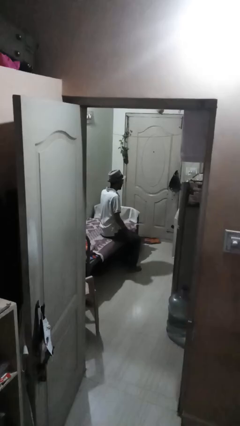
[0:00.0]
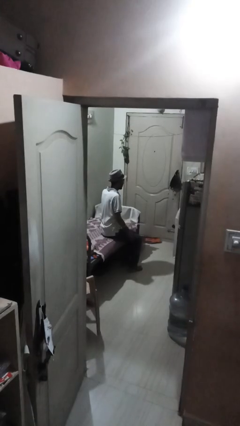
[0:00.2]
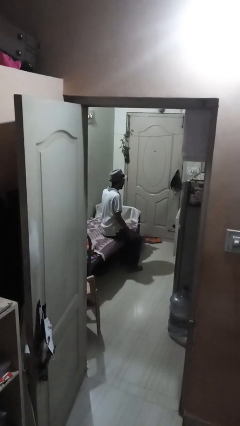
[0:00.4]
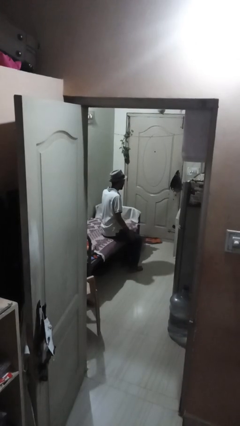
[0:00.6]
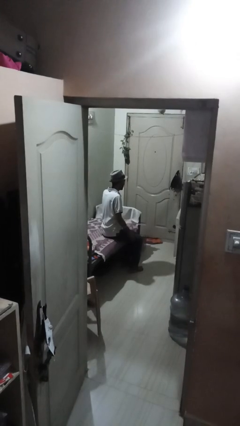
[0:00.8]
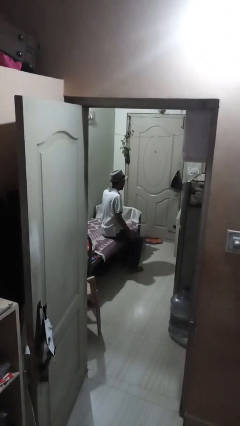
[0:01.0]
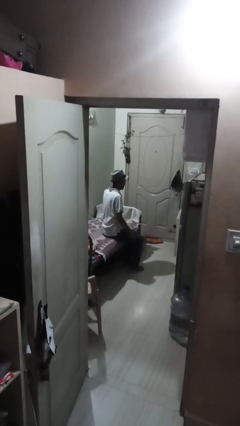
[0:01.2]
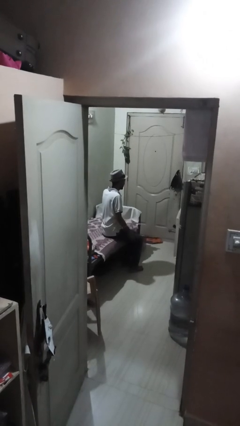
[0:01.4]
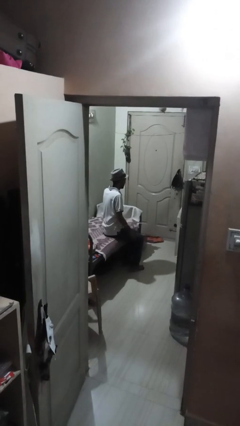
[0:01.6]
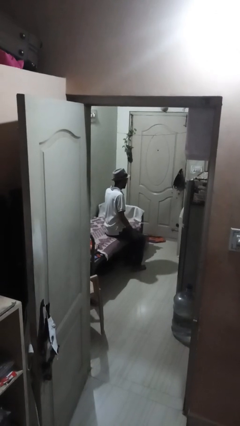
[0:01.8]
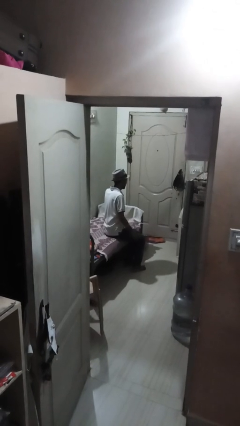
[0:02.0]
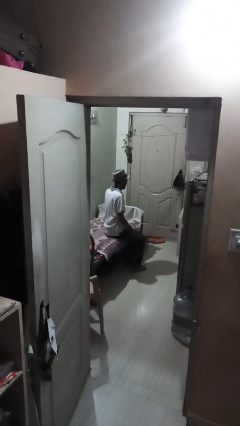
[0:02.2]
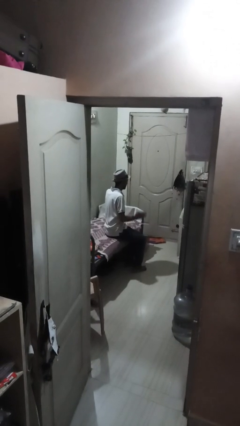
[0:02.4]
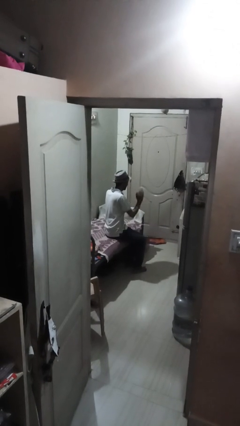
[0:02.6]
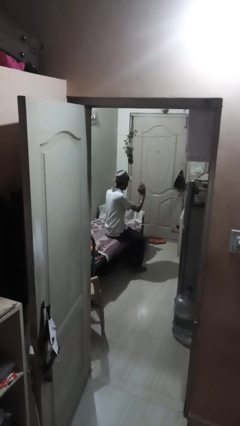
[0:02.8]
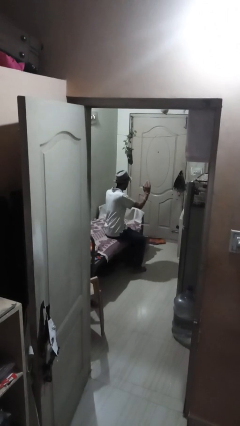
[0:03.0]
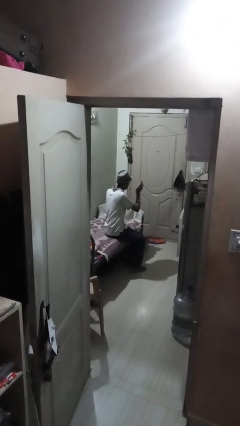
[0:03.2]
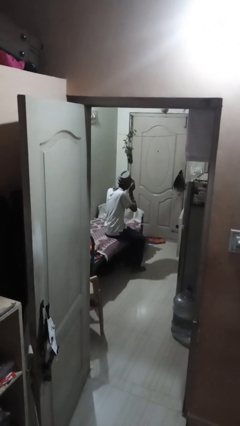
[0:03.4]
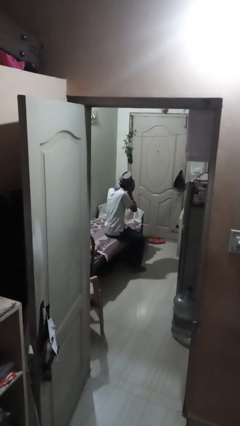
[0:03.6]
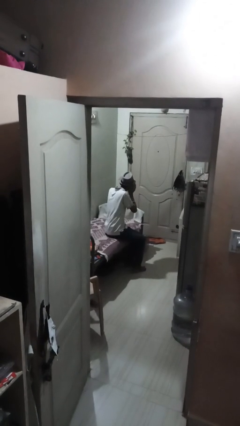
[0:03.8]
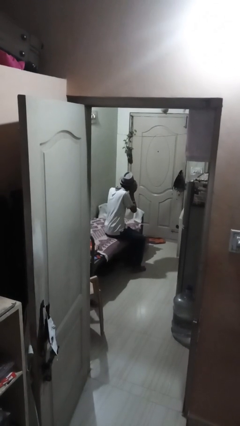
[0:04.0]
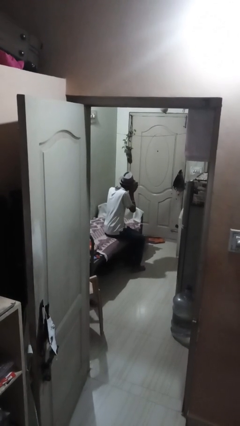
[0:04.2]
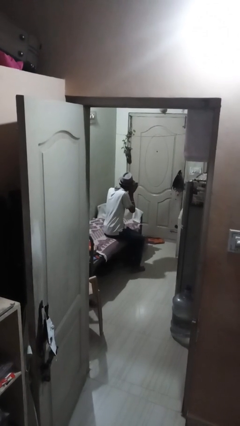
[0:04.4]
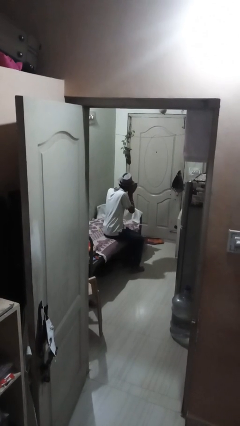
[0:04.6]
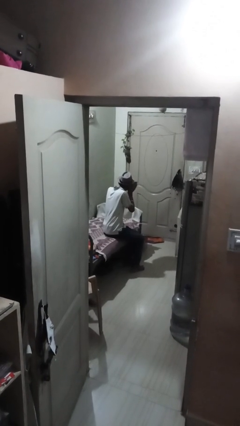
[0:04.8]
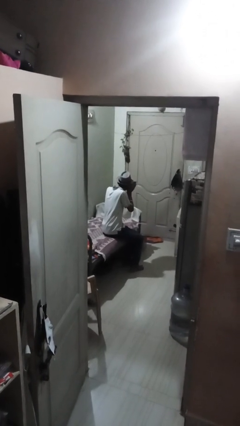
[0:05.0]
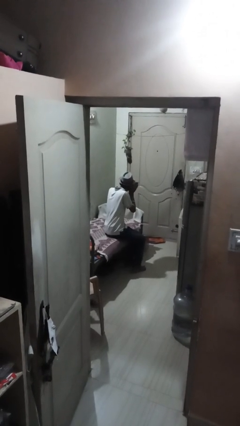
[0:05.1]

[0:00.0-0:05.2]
person gestures listen closely

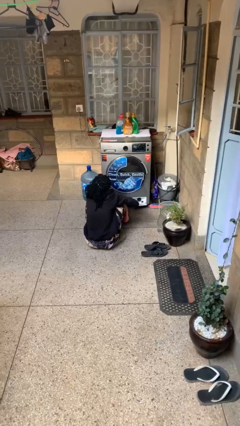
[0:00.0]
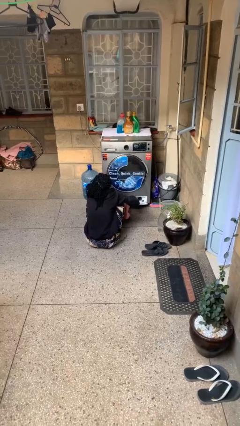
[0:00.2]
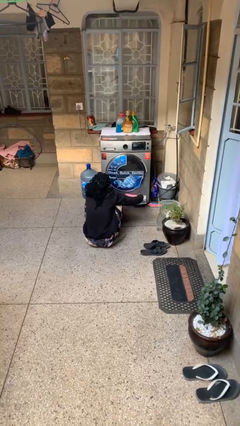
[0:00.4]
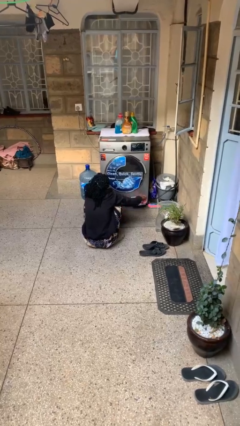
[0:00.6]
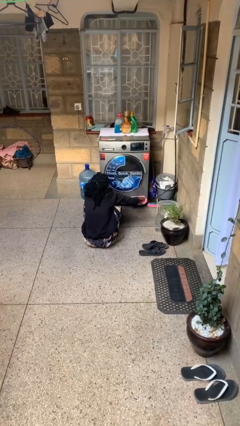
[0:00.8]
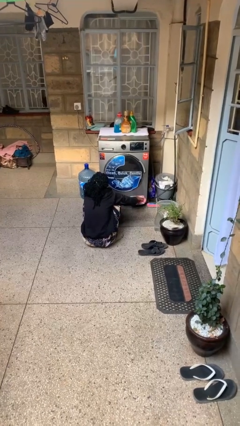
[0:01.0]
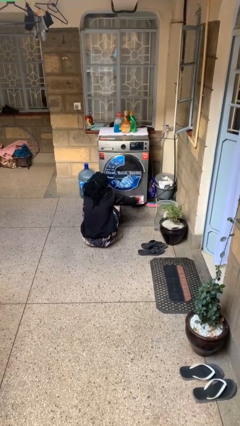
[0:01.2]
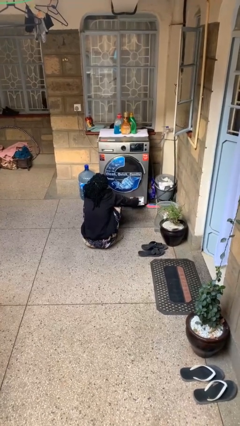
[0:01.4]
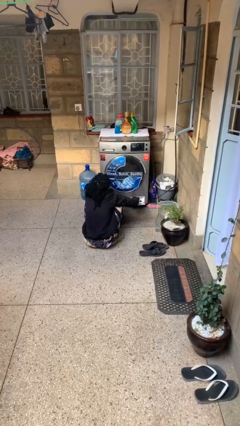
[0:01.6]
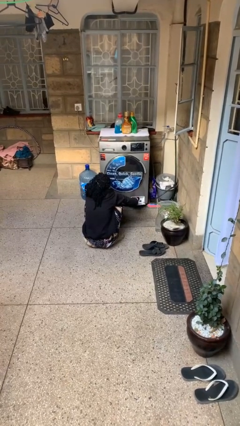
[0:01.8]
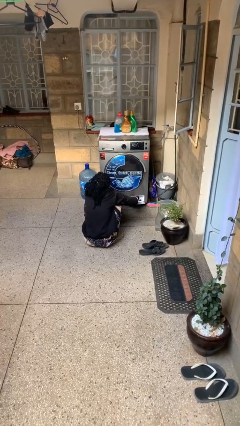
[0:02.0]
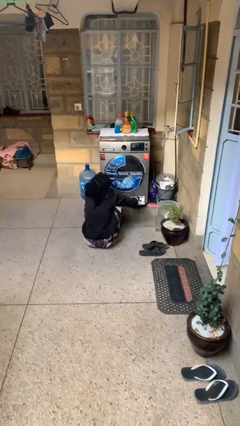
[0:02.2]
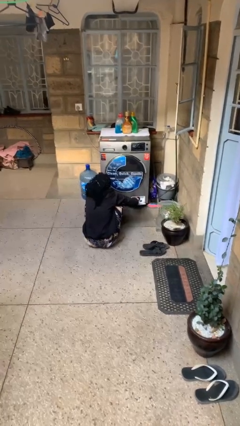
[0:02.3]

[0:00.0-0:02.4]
person cleans dryer lint trap

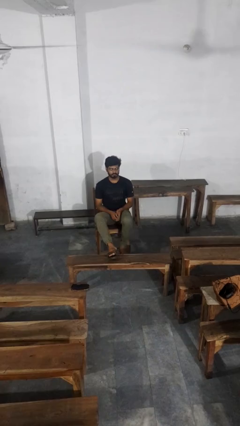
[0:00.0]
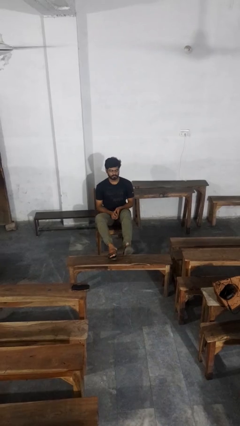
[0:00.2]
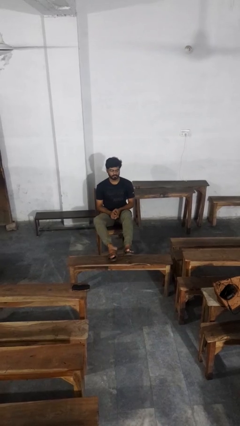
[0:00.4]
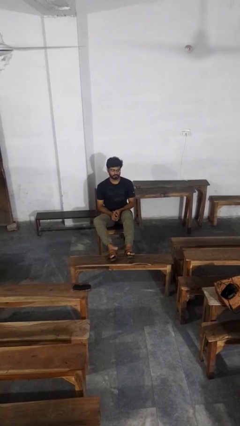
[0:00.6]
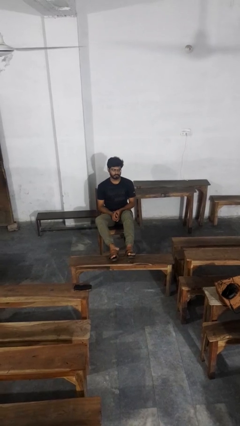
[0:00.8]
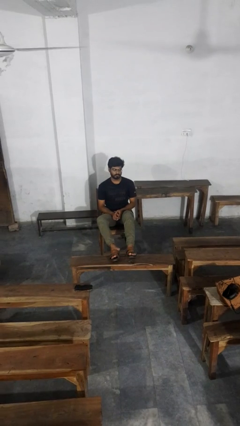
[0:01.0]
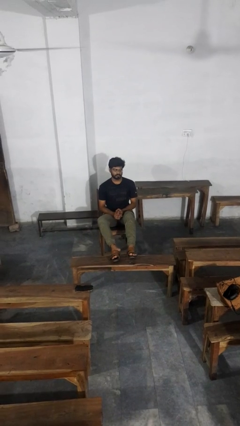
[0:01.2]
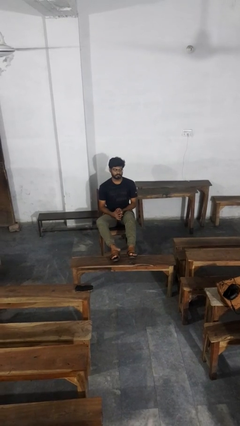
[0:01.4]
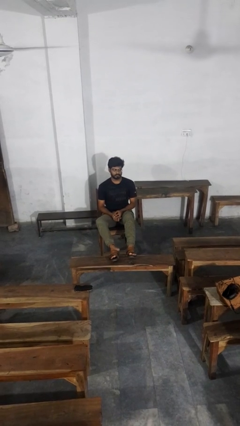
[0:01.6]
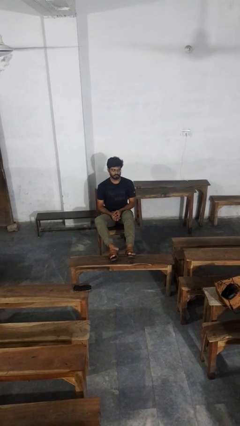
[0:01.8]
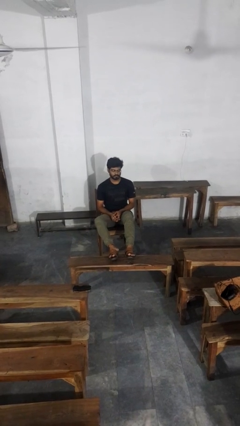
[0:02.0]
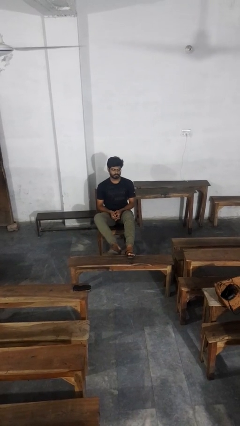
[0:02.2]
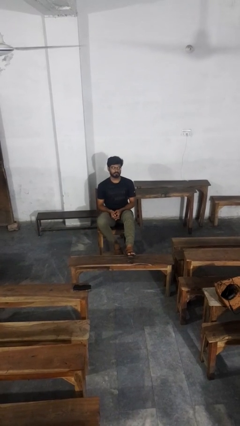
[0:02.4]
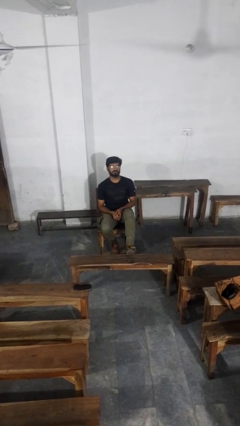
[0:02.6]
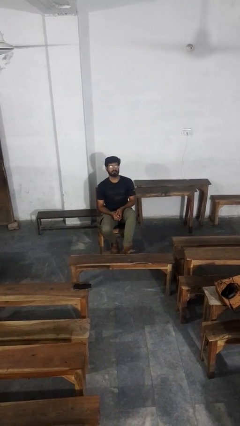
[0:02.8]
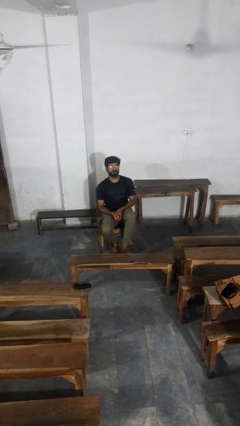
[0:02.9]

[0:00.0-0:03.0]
person puts feet up

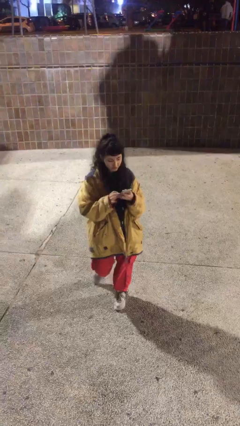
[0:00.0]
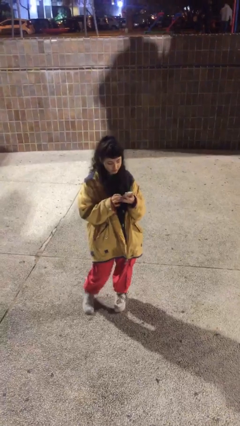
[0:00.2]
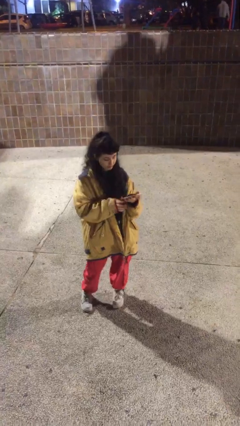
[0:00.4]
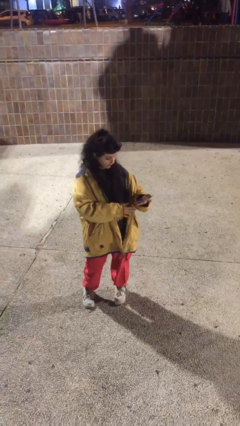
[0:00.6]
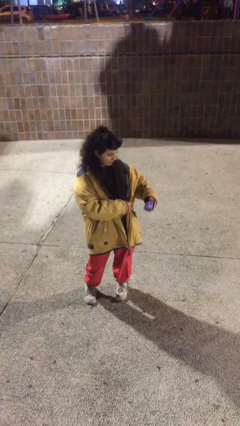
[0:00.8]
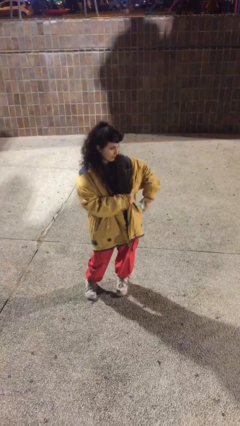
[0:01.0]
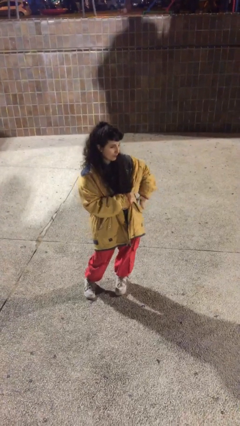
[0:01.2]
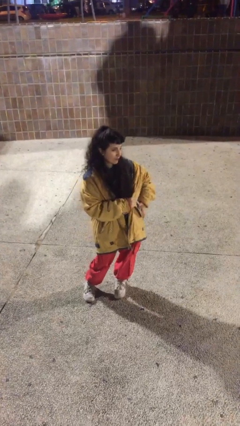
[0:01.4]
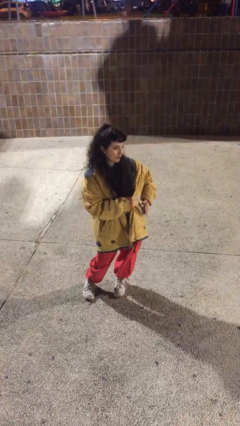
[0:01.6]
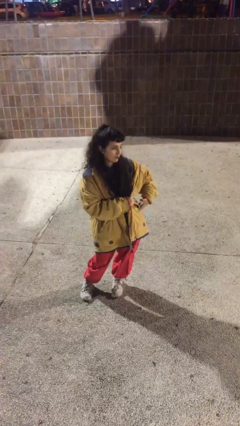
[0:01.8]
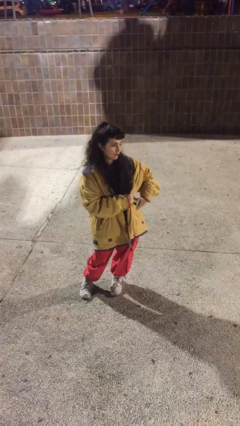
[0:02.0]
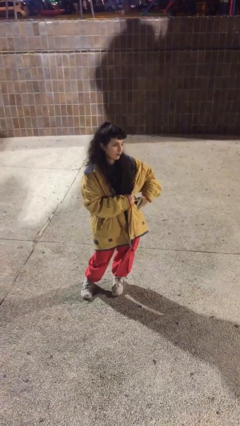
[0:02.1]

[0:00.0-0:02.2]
person puts phone into pocket

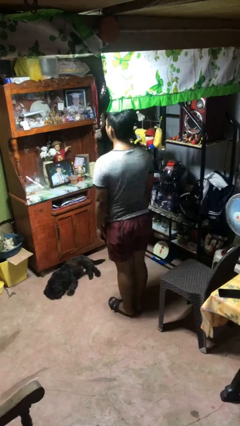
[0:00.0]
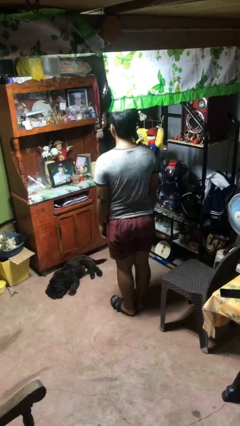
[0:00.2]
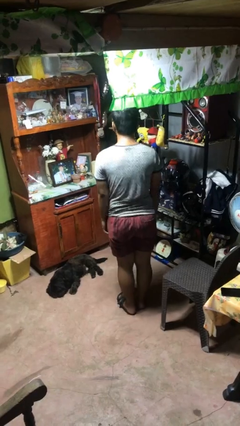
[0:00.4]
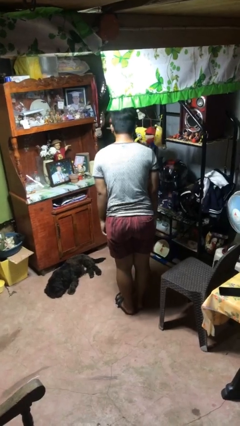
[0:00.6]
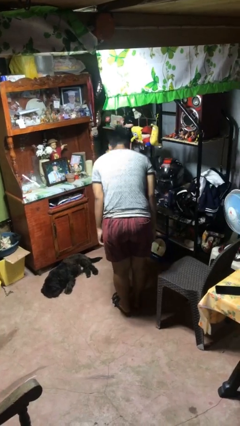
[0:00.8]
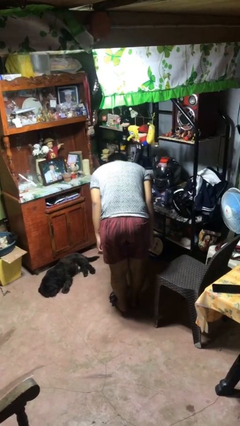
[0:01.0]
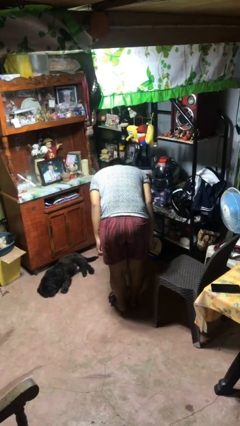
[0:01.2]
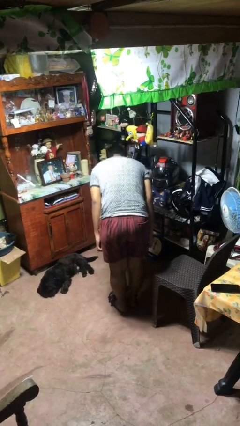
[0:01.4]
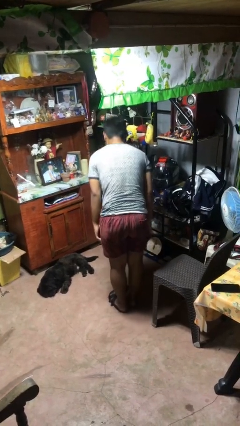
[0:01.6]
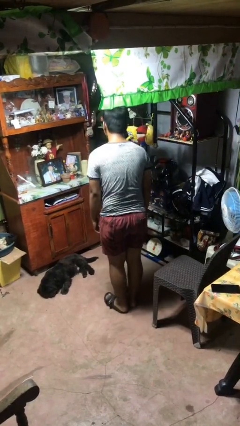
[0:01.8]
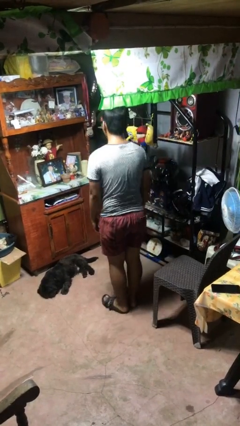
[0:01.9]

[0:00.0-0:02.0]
person bows

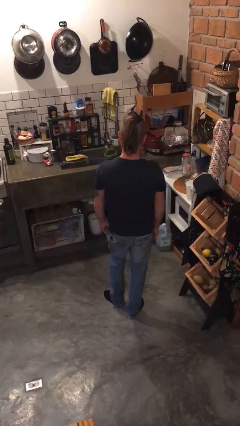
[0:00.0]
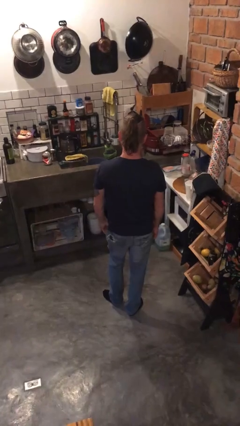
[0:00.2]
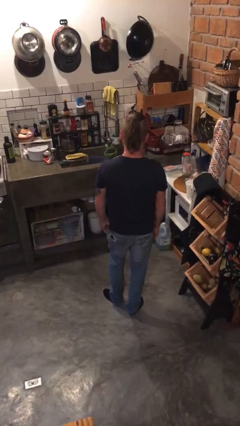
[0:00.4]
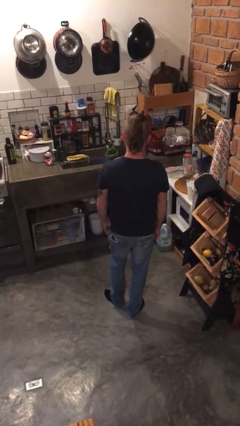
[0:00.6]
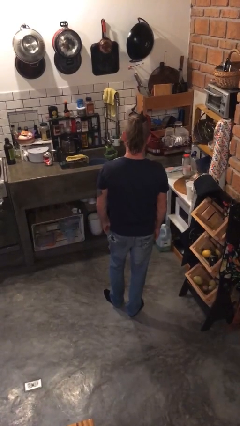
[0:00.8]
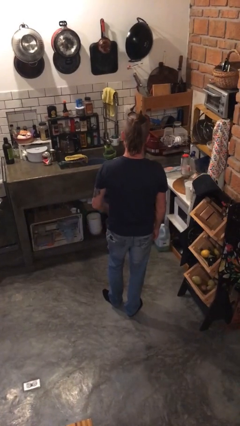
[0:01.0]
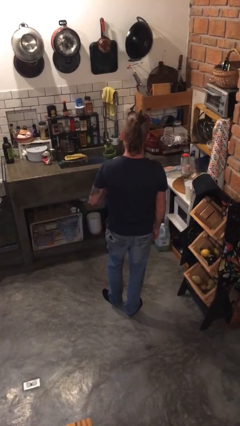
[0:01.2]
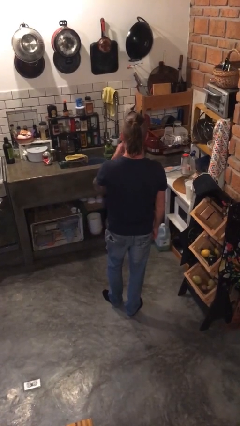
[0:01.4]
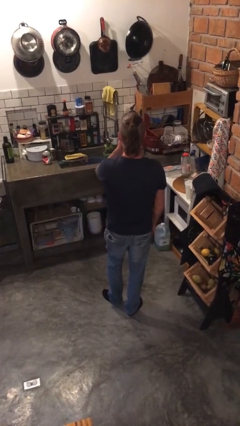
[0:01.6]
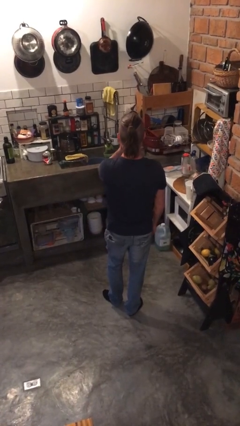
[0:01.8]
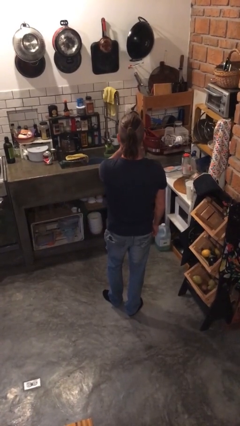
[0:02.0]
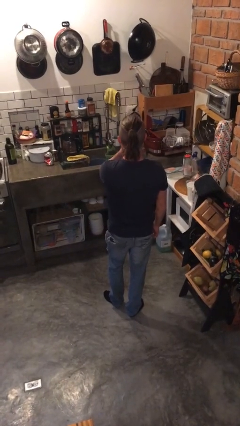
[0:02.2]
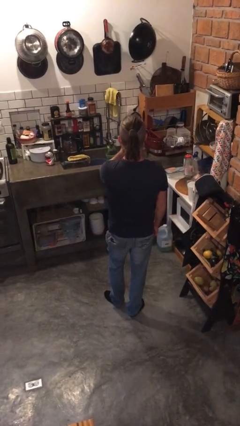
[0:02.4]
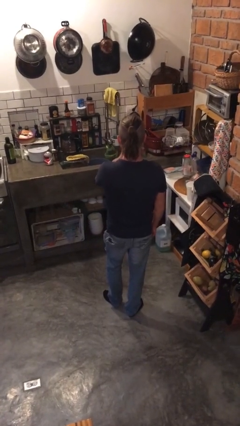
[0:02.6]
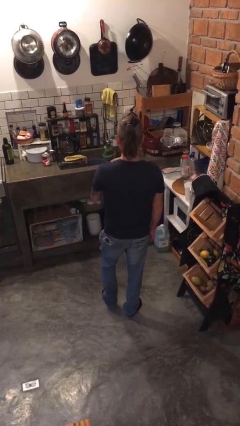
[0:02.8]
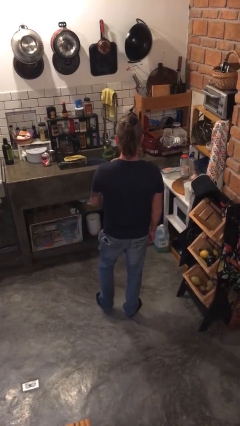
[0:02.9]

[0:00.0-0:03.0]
person yawns
